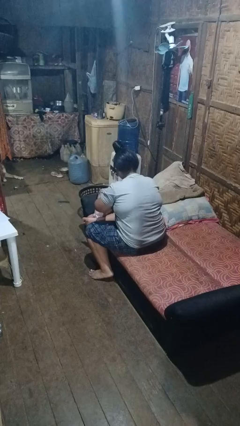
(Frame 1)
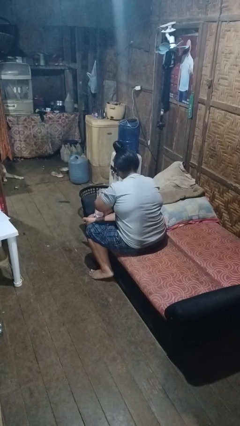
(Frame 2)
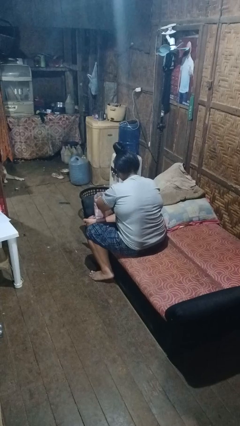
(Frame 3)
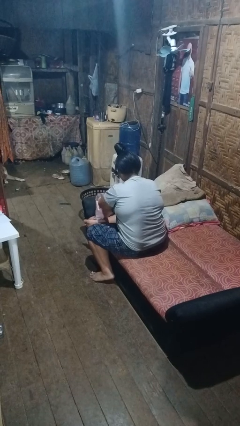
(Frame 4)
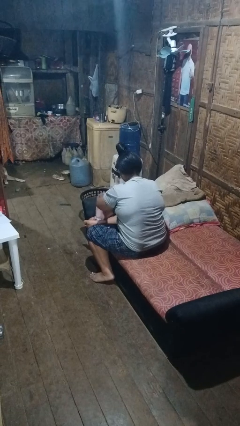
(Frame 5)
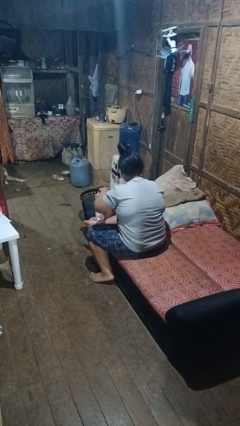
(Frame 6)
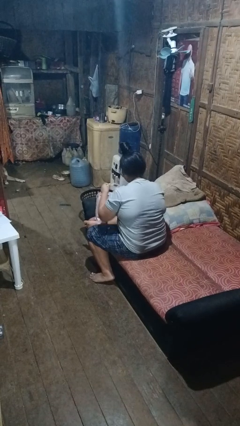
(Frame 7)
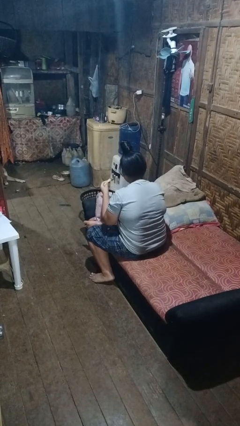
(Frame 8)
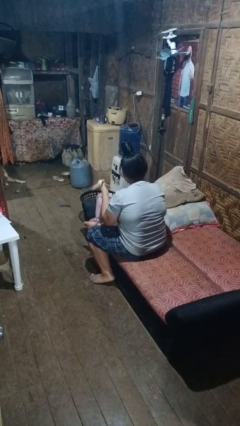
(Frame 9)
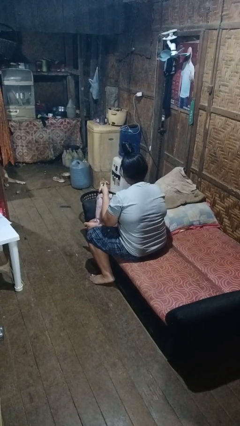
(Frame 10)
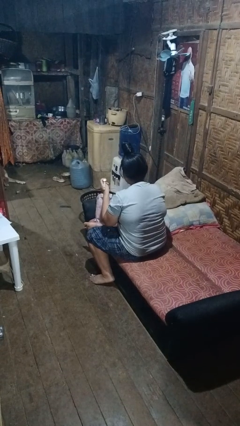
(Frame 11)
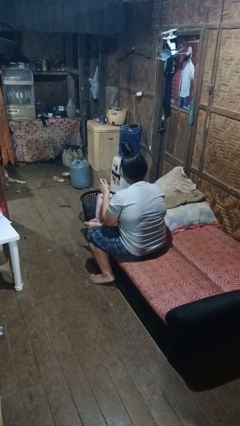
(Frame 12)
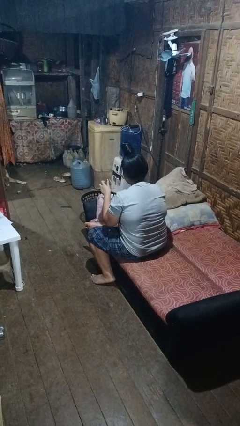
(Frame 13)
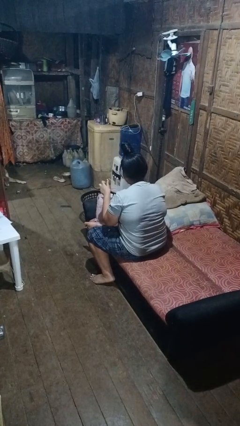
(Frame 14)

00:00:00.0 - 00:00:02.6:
person takes object from bag

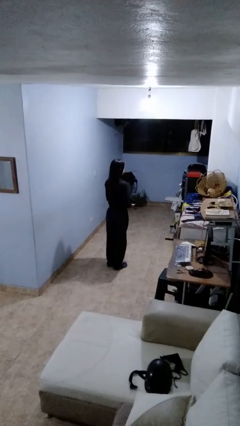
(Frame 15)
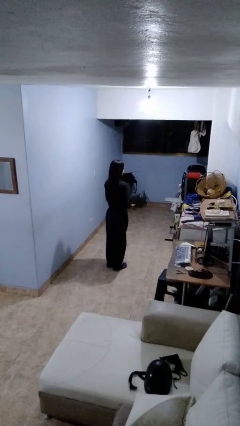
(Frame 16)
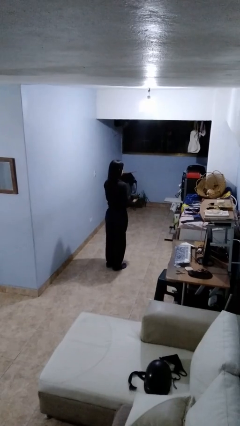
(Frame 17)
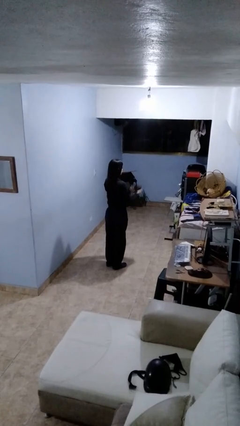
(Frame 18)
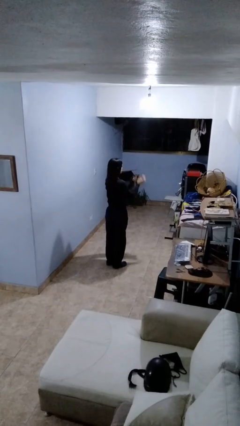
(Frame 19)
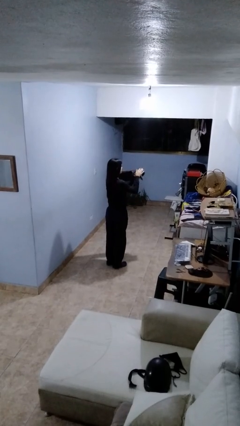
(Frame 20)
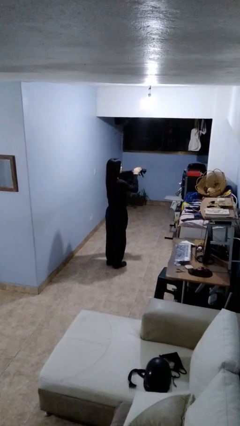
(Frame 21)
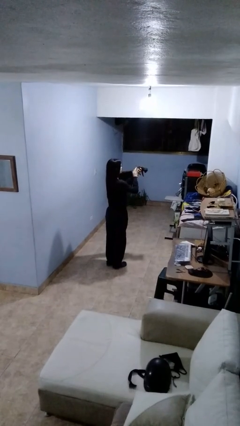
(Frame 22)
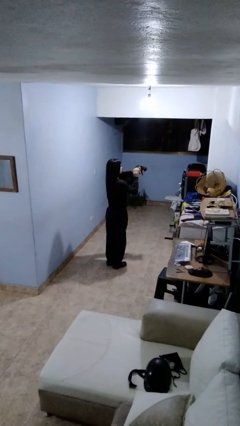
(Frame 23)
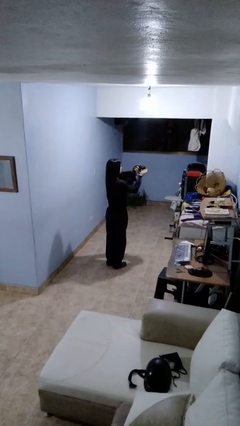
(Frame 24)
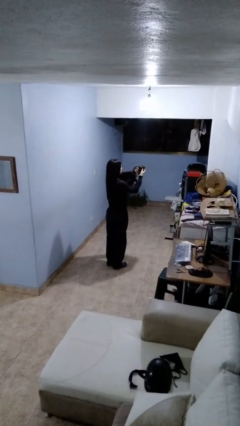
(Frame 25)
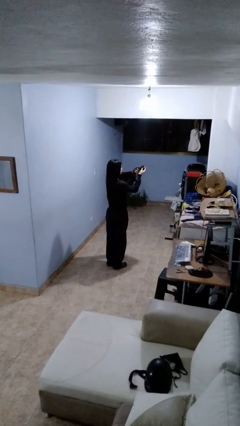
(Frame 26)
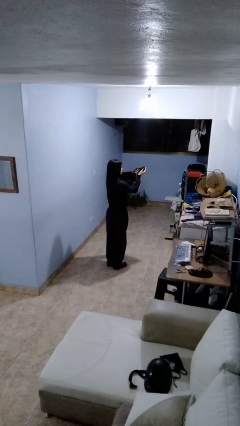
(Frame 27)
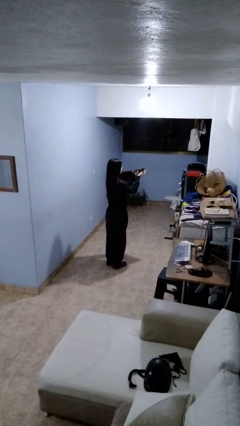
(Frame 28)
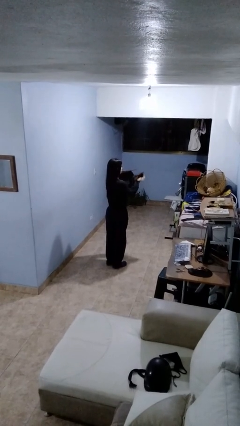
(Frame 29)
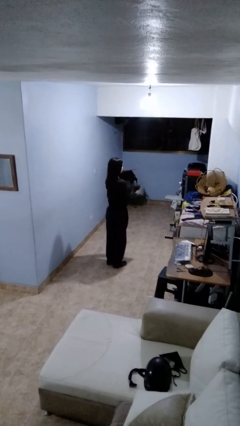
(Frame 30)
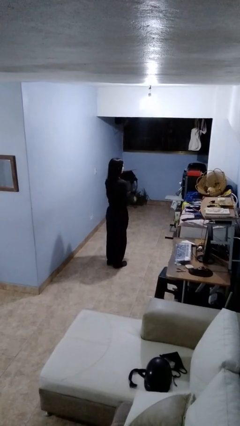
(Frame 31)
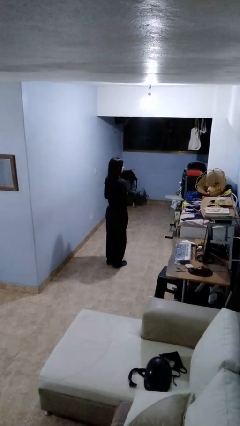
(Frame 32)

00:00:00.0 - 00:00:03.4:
person pets cat

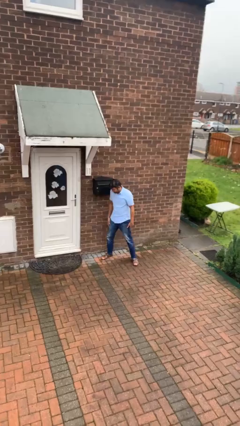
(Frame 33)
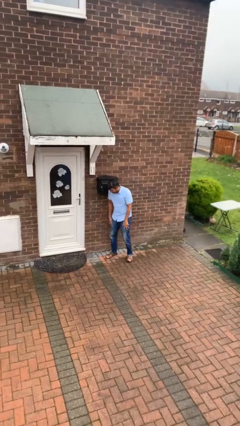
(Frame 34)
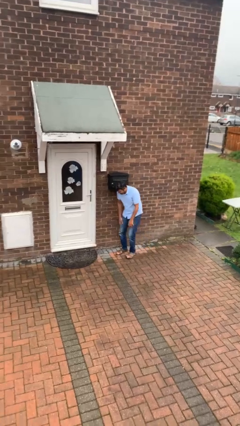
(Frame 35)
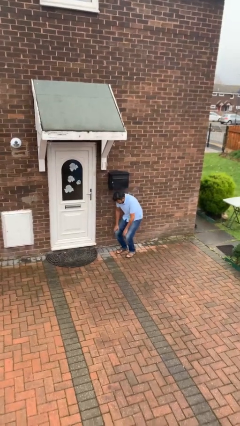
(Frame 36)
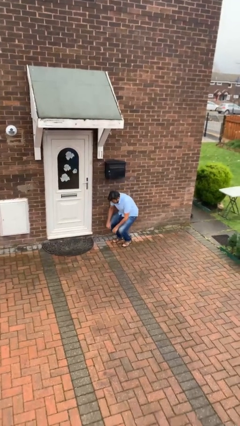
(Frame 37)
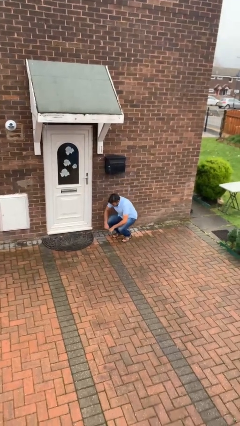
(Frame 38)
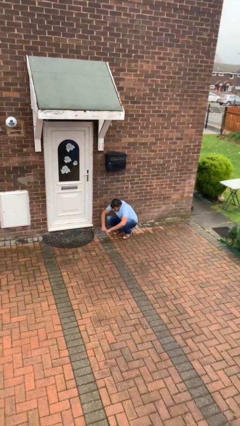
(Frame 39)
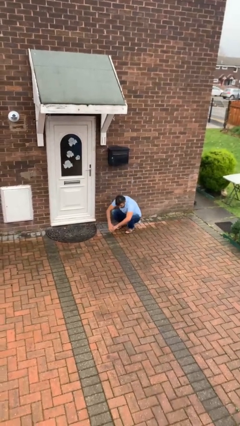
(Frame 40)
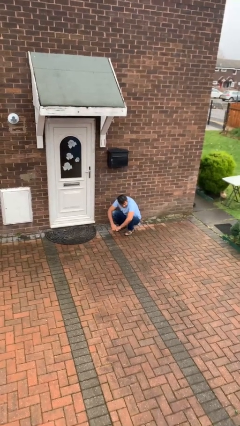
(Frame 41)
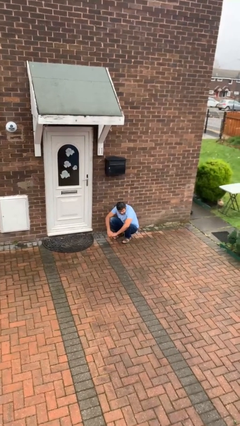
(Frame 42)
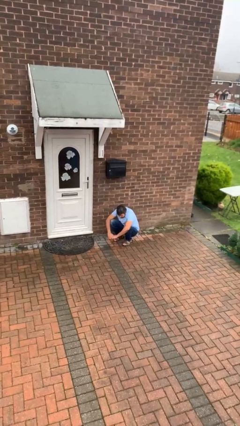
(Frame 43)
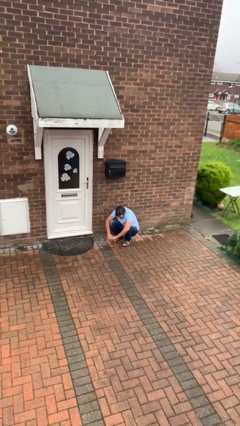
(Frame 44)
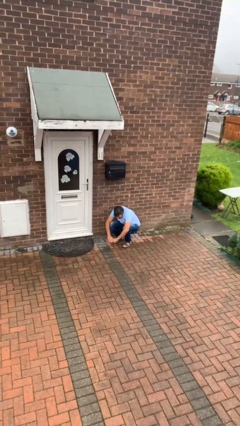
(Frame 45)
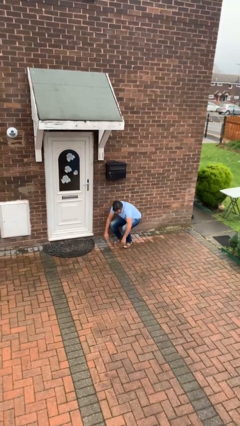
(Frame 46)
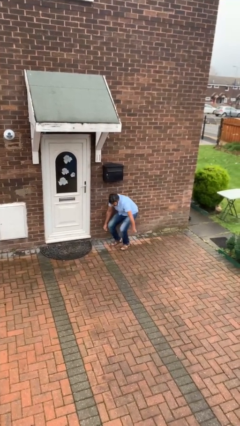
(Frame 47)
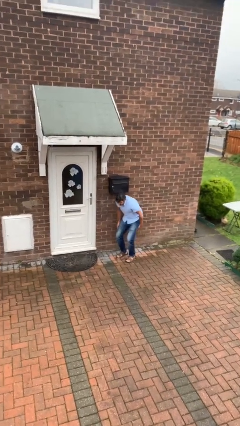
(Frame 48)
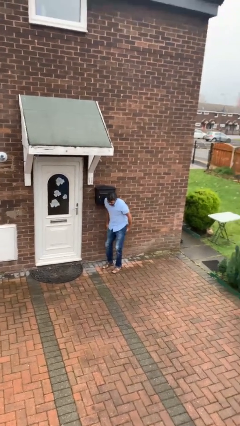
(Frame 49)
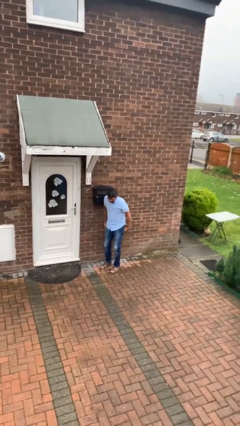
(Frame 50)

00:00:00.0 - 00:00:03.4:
person sits down

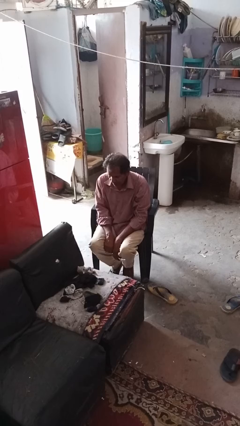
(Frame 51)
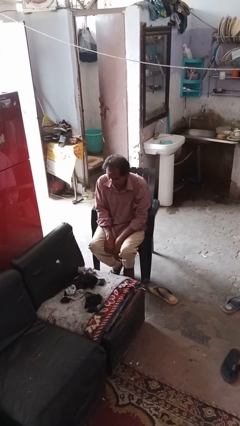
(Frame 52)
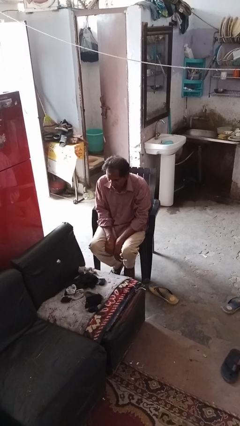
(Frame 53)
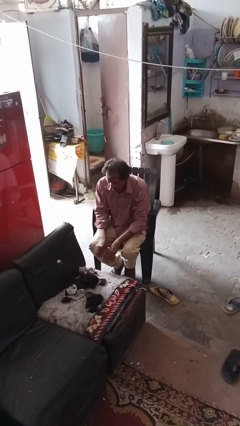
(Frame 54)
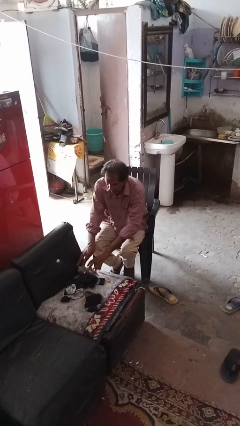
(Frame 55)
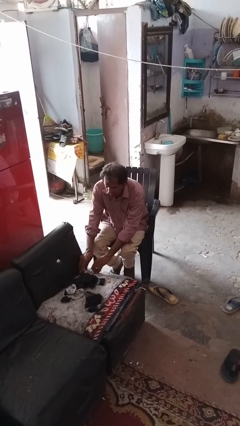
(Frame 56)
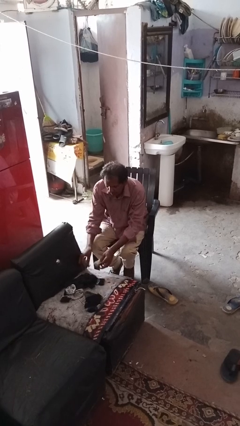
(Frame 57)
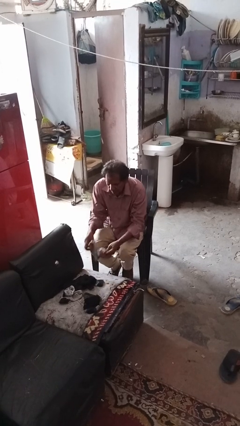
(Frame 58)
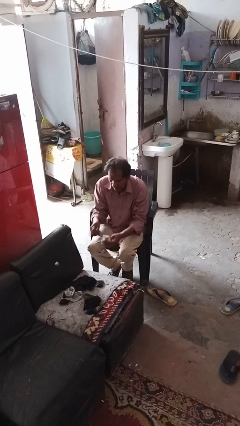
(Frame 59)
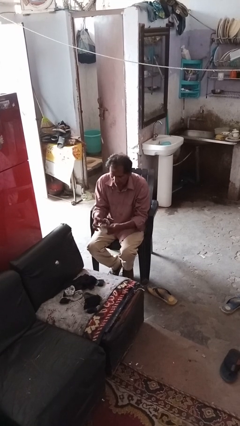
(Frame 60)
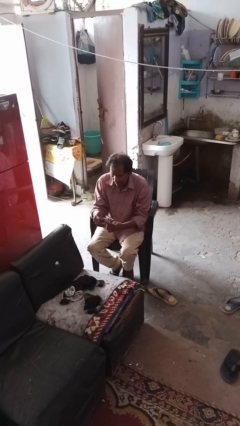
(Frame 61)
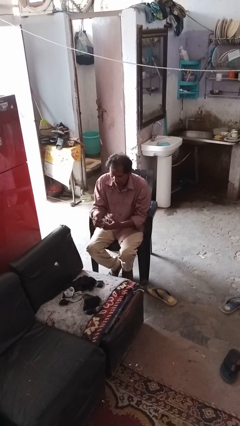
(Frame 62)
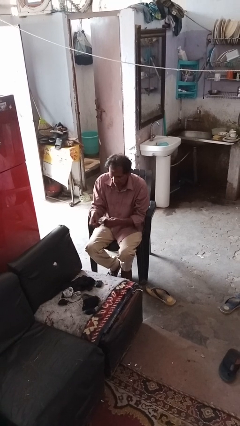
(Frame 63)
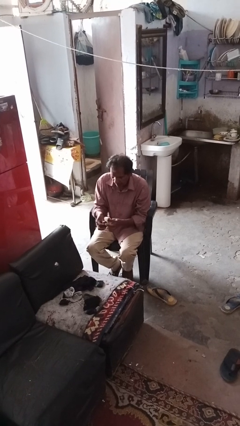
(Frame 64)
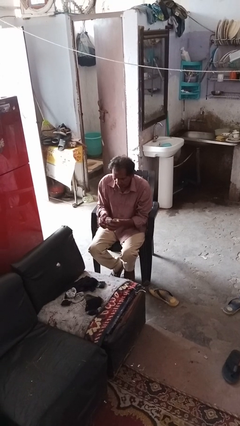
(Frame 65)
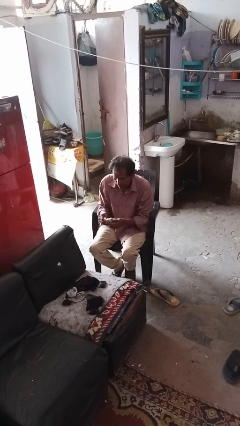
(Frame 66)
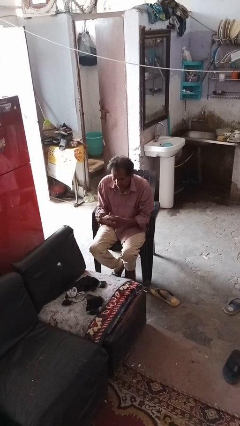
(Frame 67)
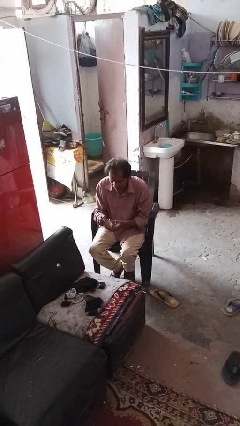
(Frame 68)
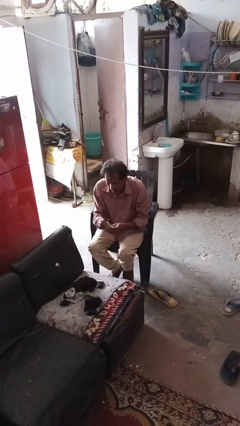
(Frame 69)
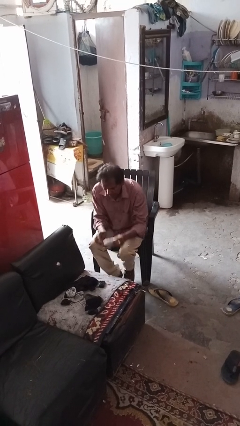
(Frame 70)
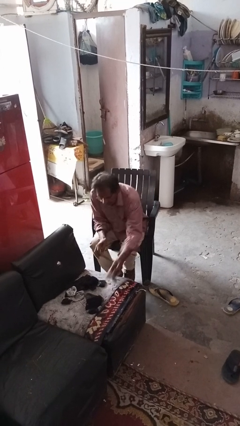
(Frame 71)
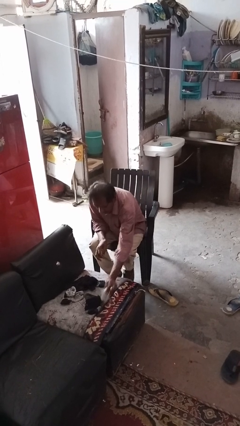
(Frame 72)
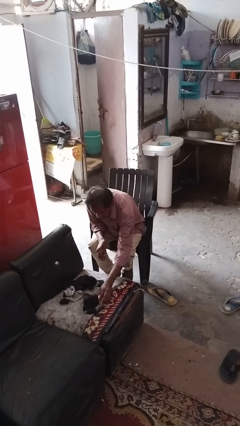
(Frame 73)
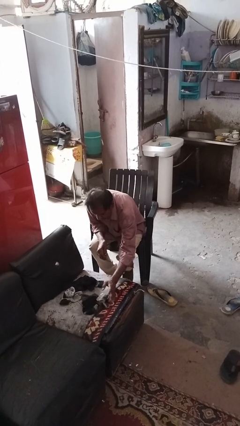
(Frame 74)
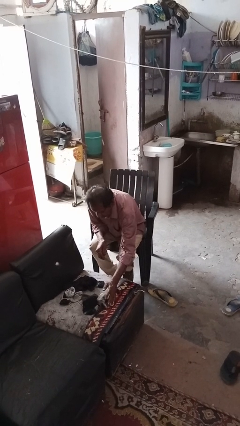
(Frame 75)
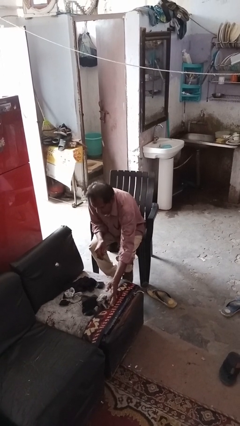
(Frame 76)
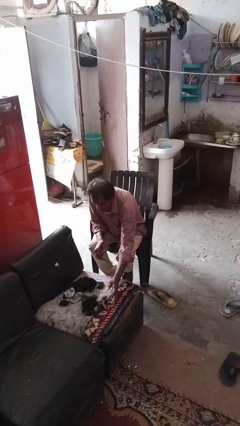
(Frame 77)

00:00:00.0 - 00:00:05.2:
person folds socks

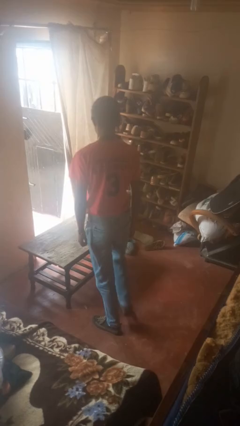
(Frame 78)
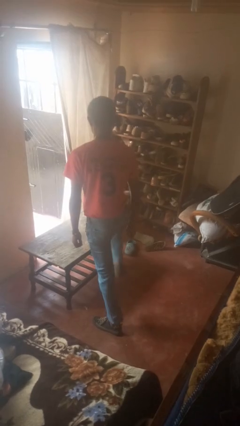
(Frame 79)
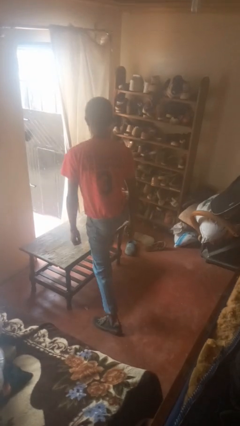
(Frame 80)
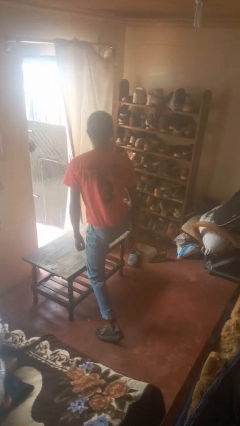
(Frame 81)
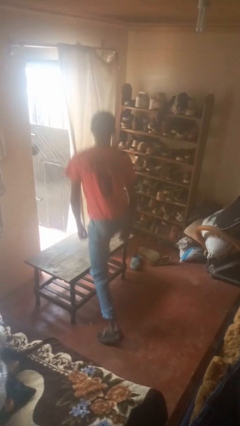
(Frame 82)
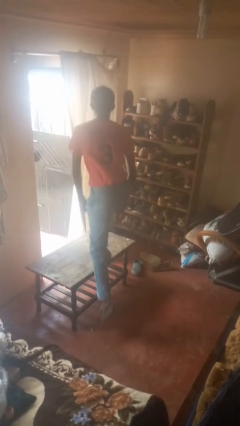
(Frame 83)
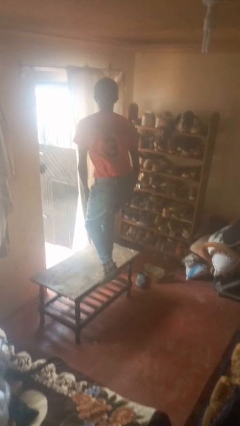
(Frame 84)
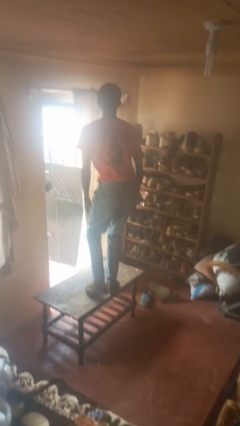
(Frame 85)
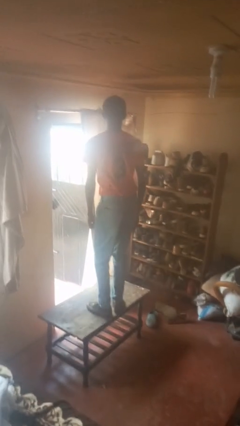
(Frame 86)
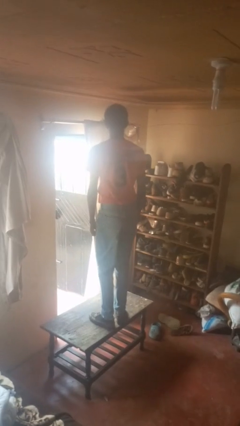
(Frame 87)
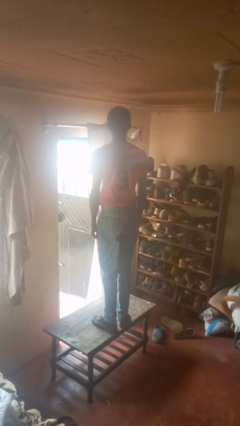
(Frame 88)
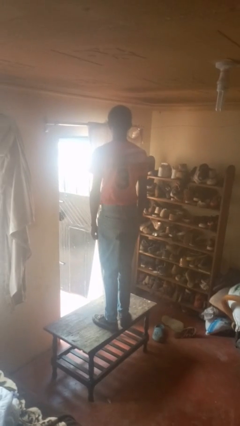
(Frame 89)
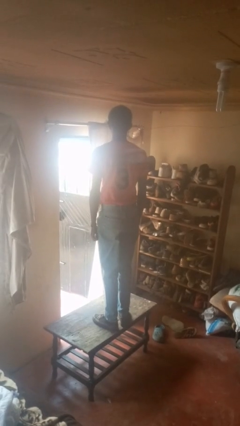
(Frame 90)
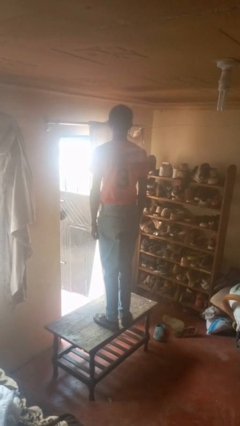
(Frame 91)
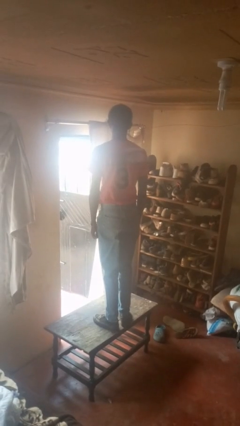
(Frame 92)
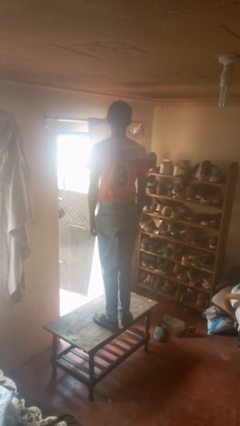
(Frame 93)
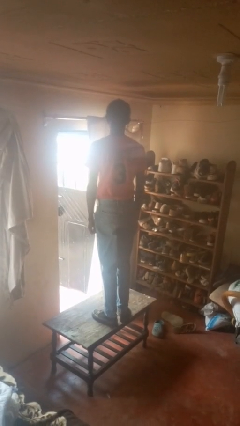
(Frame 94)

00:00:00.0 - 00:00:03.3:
person climbs on table

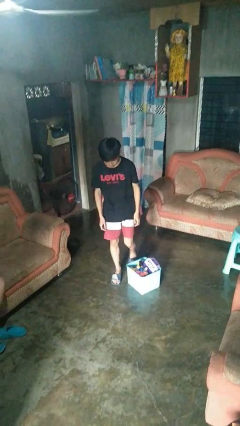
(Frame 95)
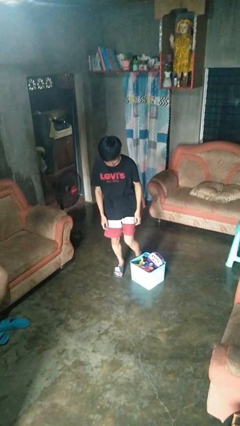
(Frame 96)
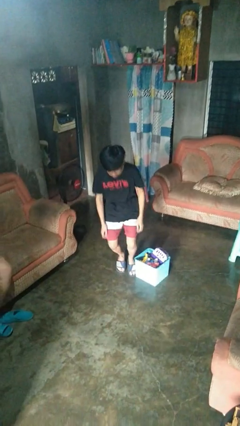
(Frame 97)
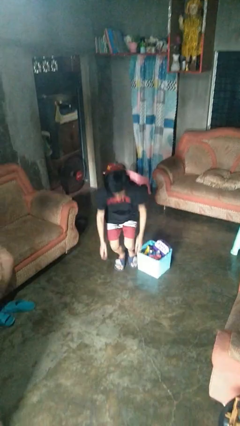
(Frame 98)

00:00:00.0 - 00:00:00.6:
person trips on object on floor
